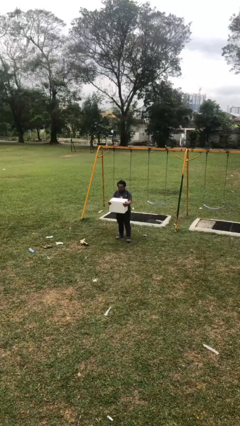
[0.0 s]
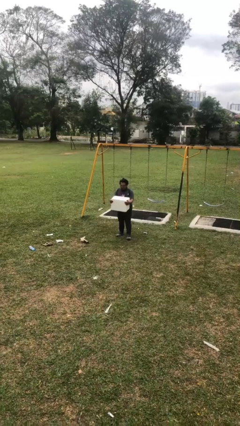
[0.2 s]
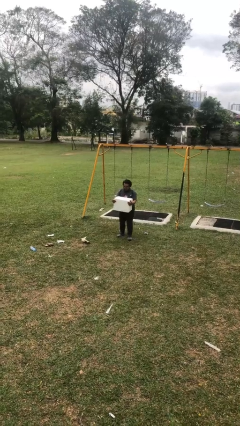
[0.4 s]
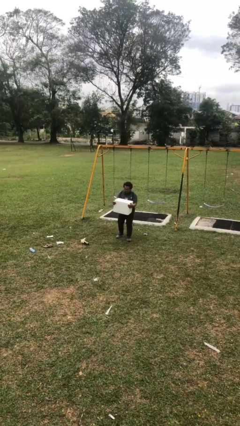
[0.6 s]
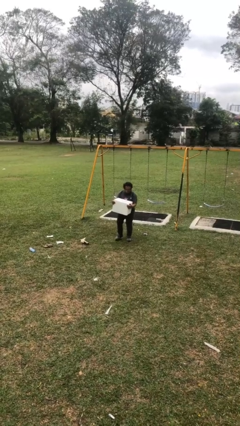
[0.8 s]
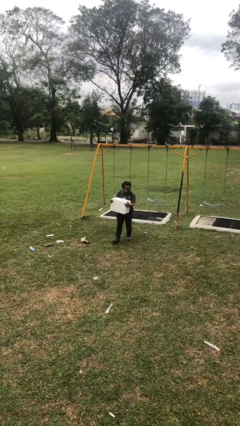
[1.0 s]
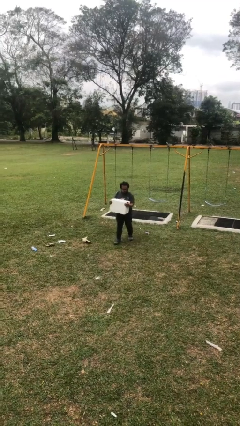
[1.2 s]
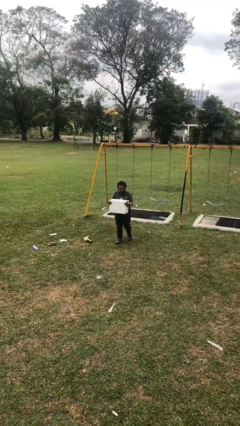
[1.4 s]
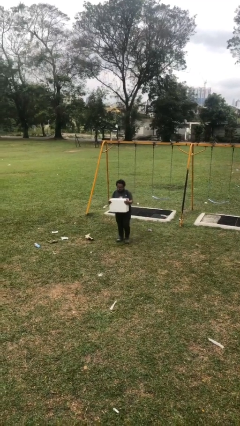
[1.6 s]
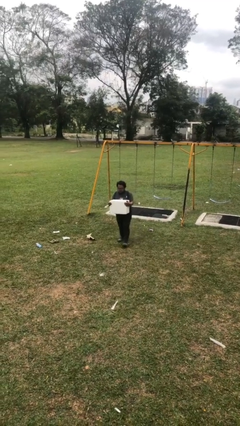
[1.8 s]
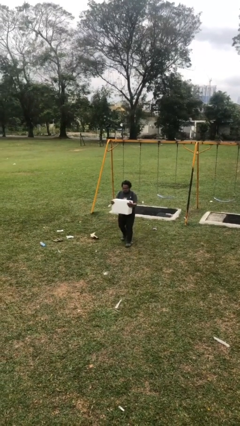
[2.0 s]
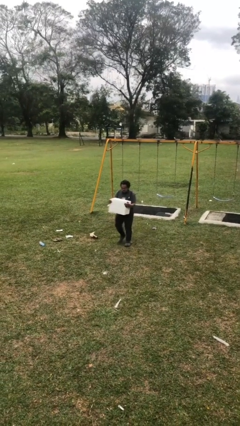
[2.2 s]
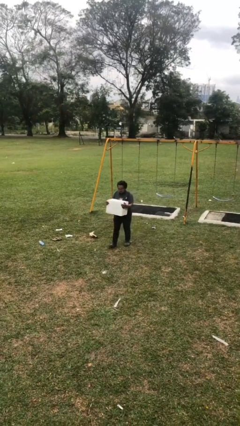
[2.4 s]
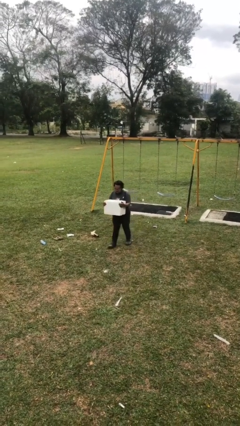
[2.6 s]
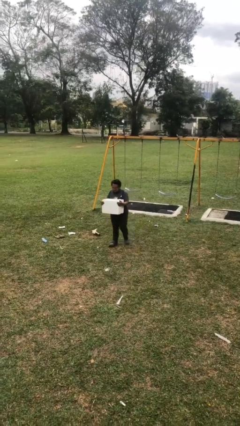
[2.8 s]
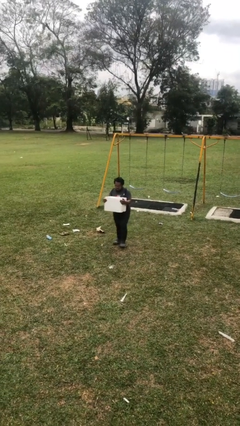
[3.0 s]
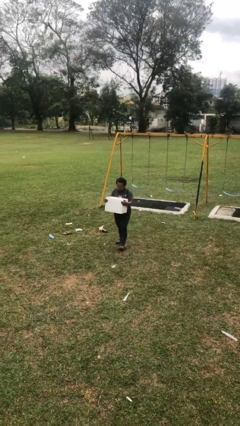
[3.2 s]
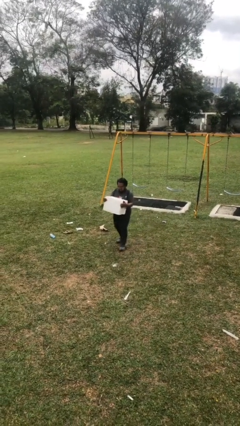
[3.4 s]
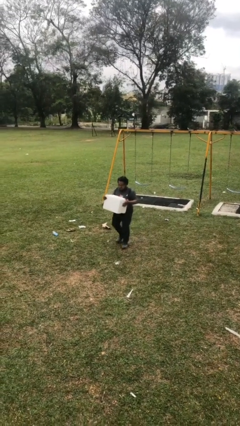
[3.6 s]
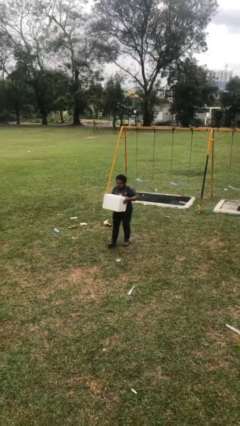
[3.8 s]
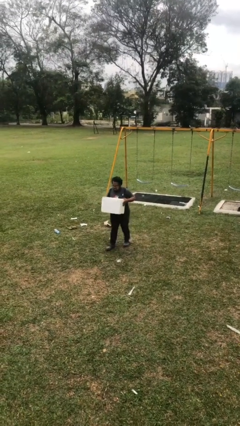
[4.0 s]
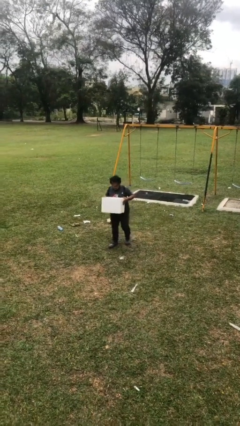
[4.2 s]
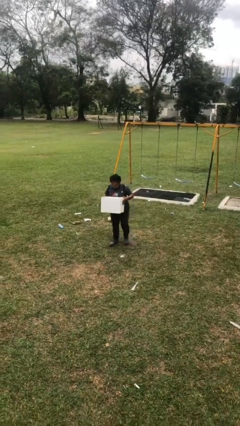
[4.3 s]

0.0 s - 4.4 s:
person carries heavy object

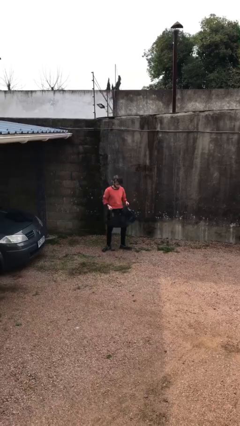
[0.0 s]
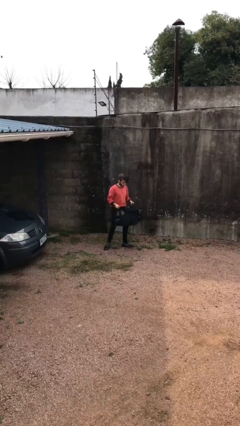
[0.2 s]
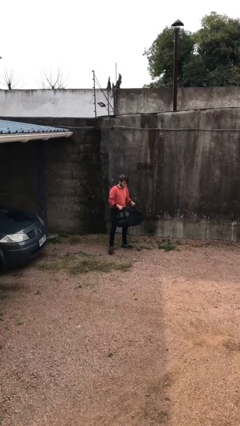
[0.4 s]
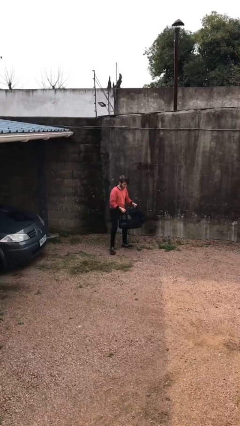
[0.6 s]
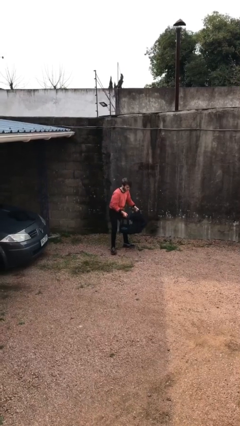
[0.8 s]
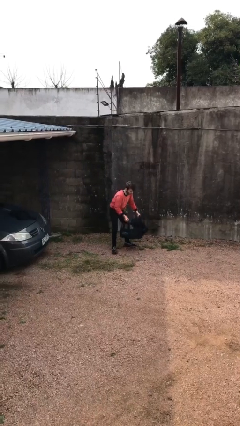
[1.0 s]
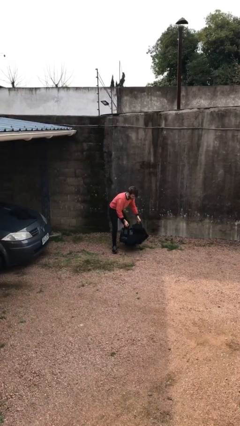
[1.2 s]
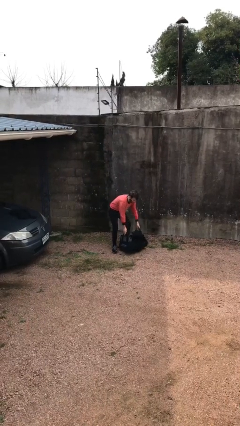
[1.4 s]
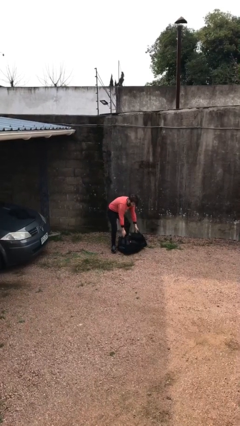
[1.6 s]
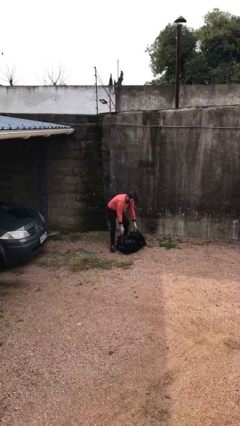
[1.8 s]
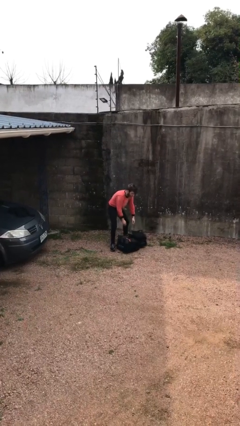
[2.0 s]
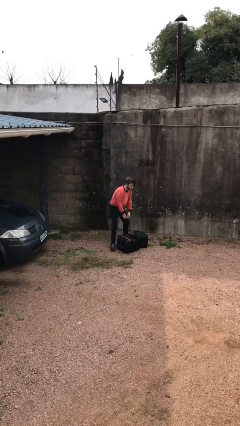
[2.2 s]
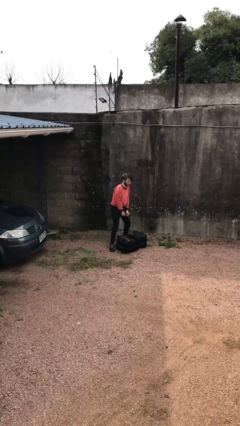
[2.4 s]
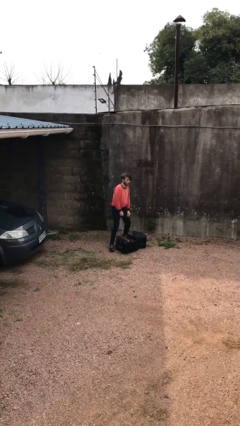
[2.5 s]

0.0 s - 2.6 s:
person puts down object on floor

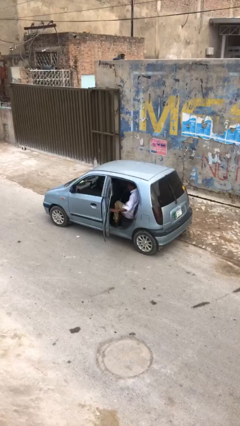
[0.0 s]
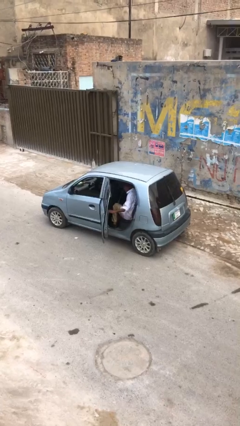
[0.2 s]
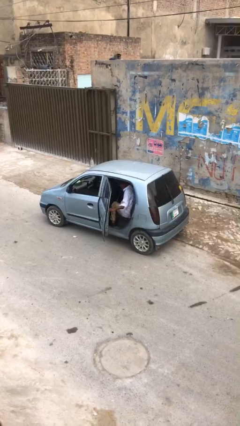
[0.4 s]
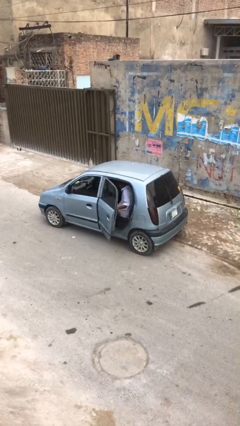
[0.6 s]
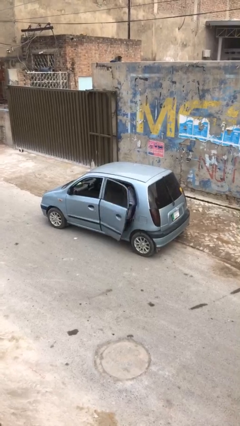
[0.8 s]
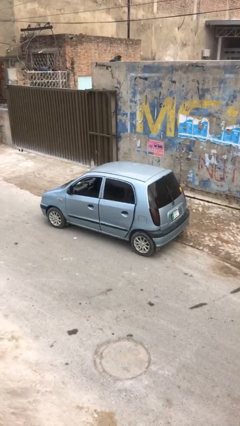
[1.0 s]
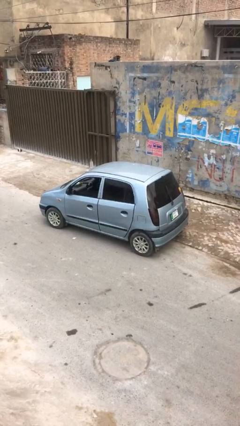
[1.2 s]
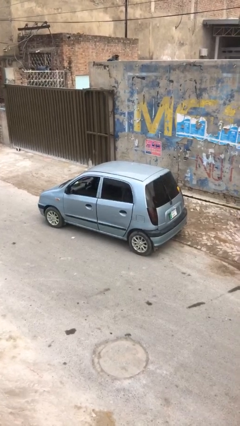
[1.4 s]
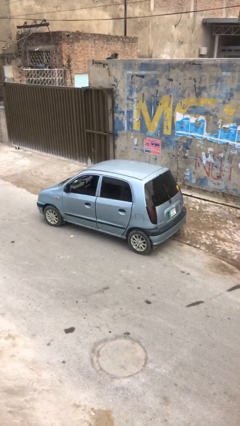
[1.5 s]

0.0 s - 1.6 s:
person closes car door

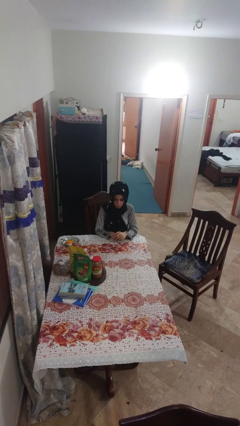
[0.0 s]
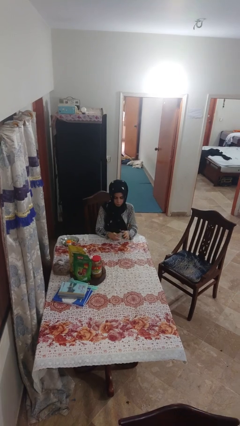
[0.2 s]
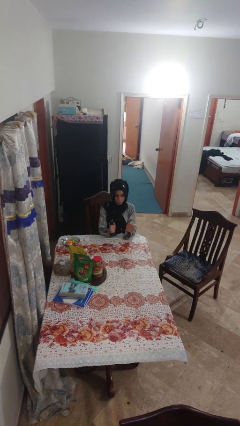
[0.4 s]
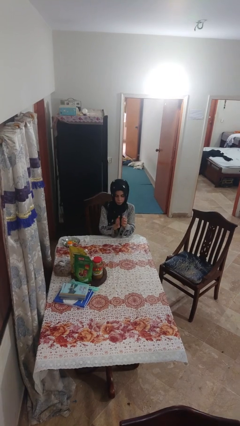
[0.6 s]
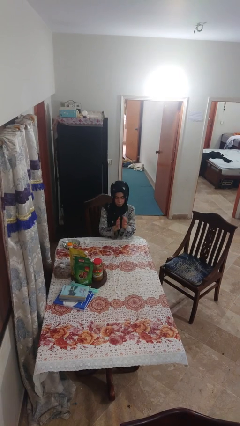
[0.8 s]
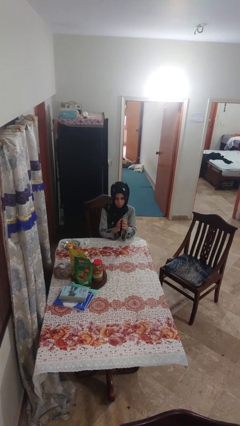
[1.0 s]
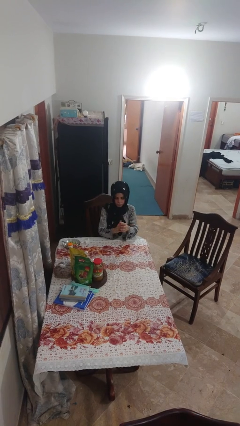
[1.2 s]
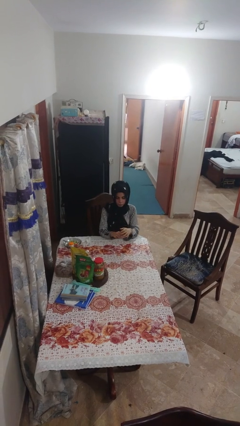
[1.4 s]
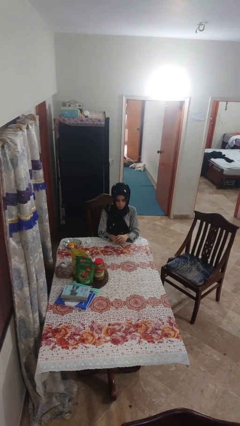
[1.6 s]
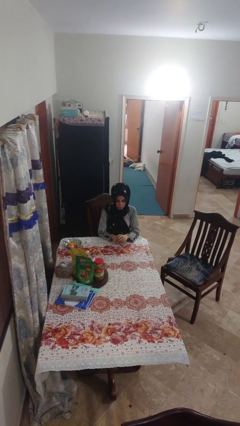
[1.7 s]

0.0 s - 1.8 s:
person claps hands

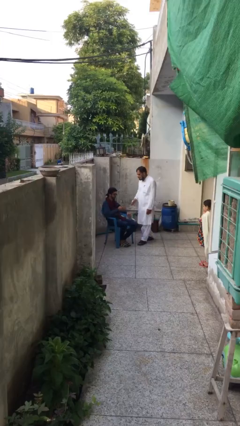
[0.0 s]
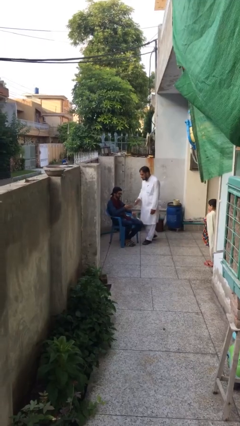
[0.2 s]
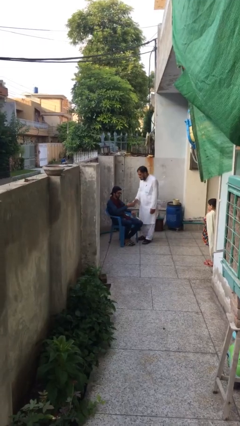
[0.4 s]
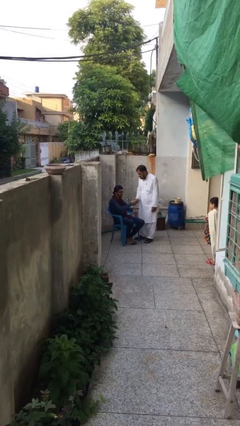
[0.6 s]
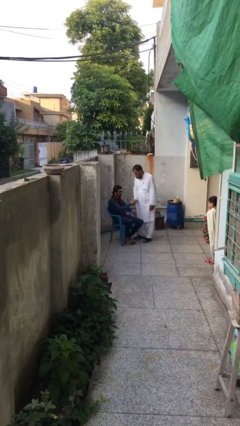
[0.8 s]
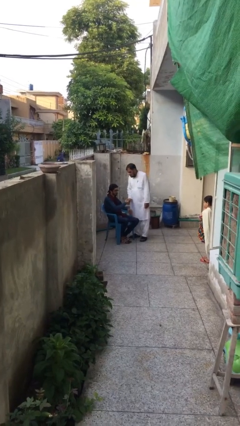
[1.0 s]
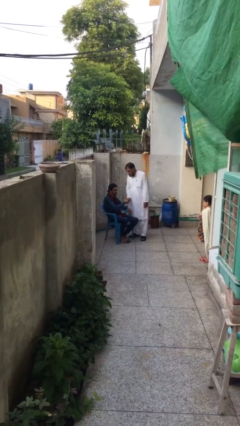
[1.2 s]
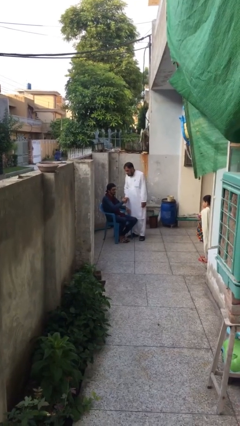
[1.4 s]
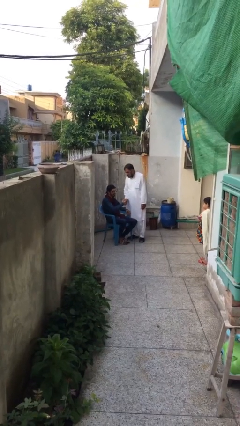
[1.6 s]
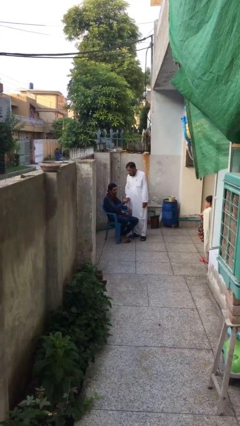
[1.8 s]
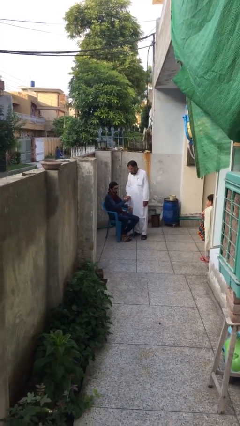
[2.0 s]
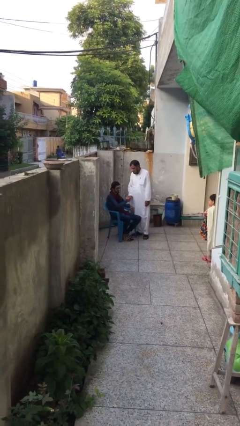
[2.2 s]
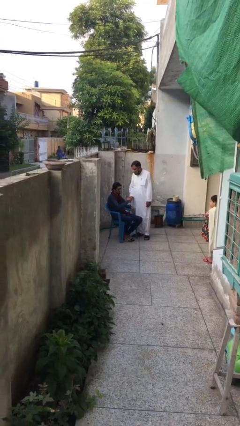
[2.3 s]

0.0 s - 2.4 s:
person shakes hand

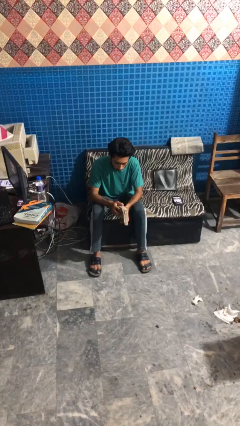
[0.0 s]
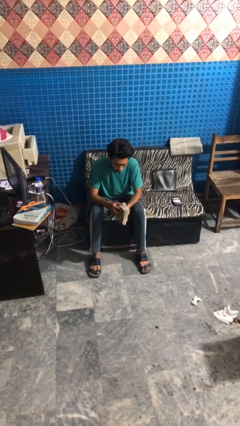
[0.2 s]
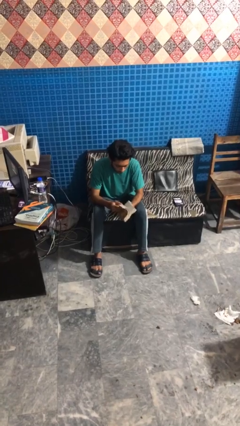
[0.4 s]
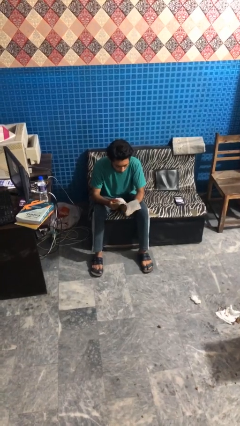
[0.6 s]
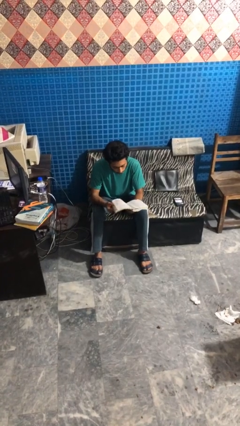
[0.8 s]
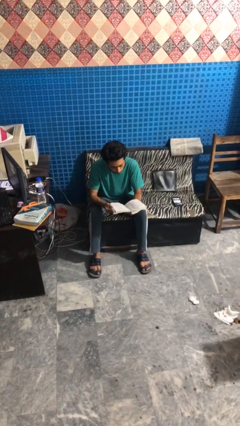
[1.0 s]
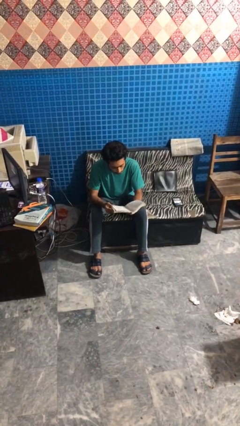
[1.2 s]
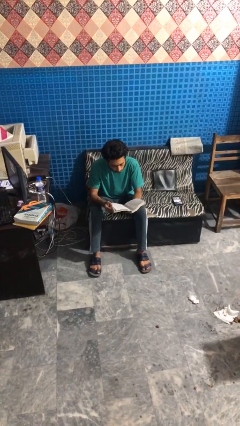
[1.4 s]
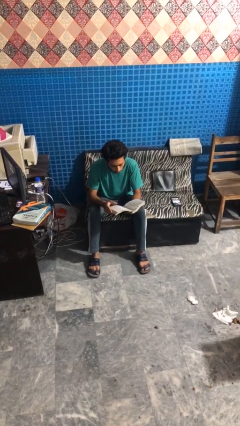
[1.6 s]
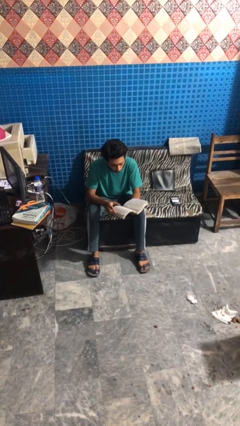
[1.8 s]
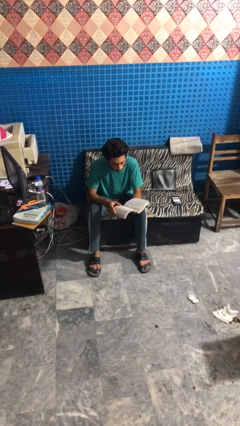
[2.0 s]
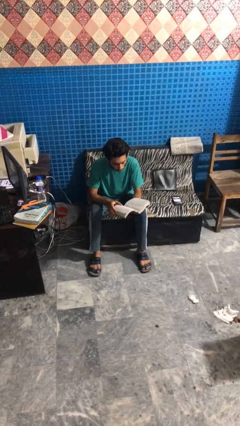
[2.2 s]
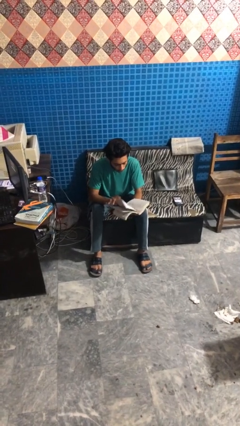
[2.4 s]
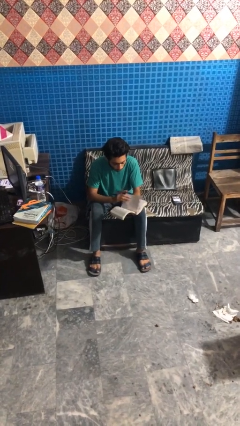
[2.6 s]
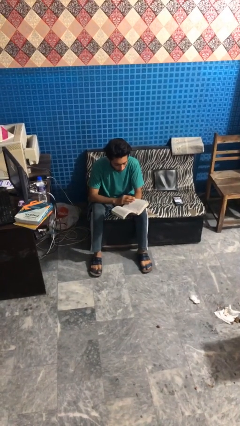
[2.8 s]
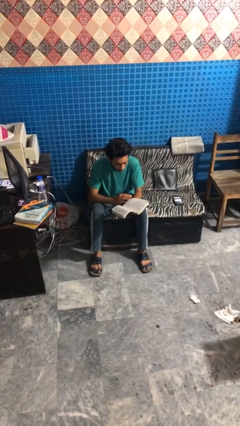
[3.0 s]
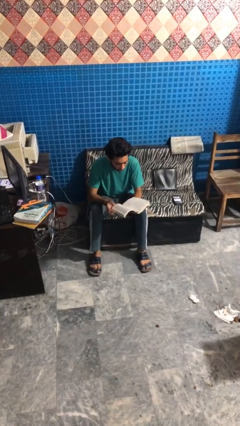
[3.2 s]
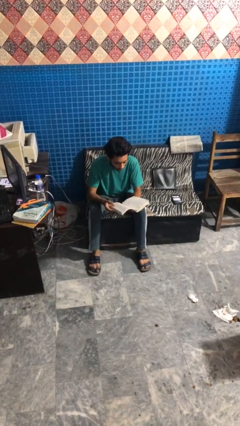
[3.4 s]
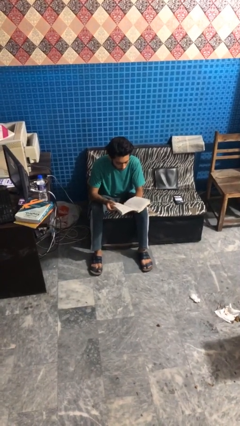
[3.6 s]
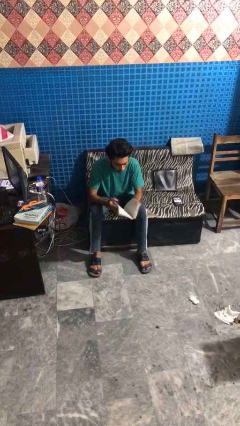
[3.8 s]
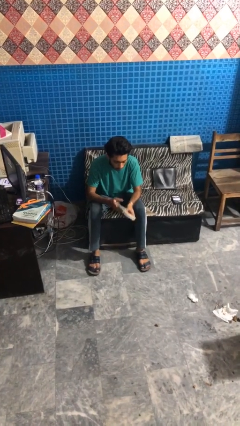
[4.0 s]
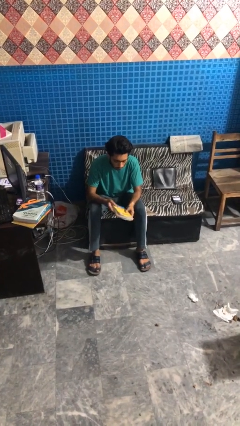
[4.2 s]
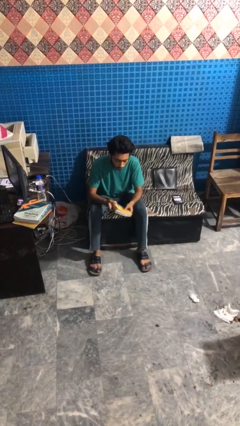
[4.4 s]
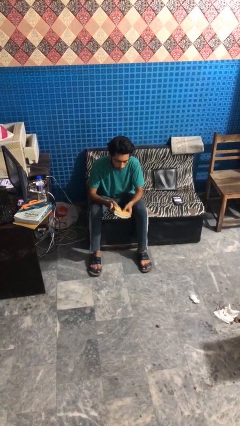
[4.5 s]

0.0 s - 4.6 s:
person reads magazine
